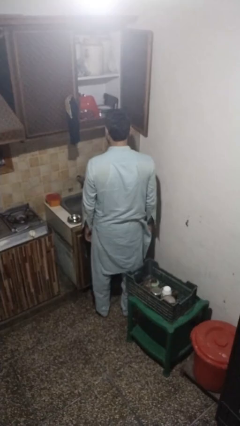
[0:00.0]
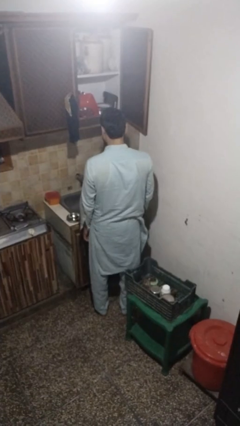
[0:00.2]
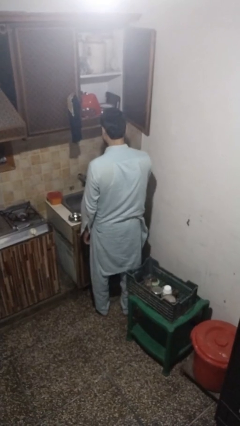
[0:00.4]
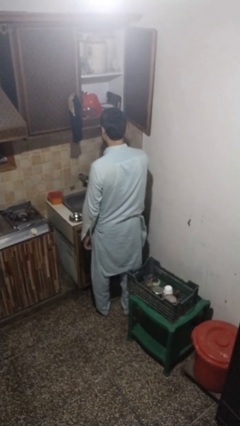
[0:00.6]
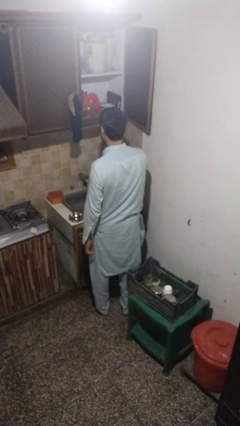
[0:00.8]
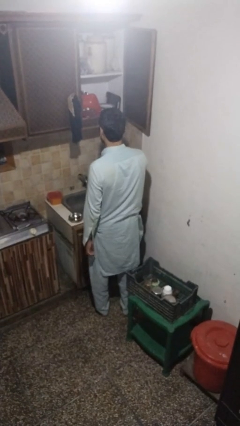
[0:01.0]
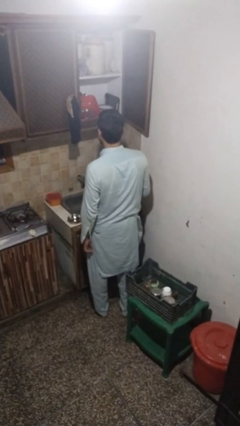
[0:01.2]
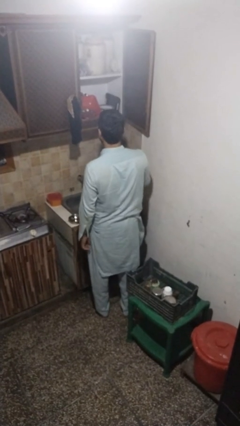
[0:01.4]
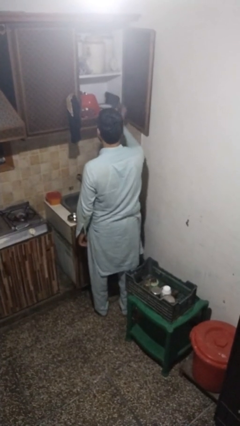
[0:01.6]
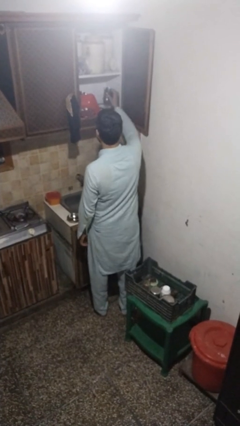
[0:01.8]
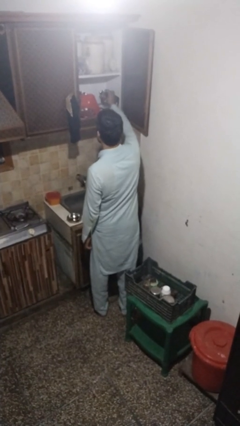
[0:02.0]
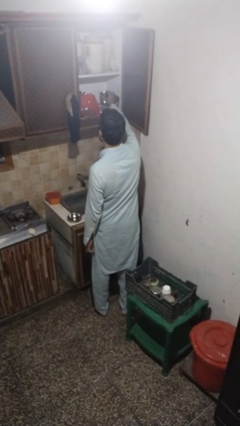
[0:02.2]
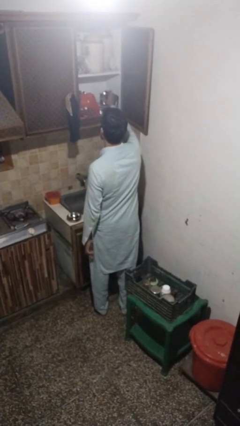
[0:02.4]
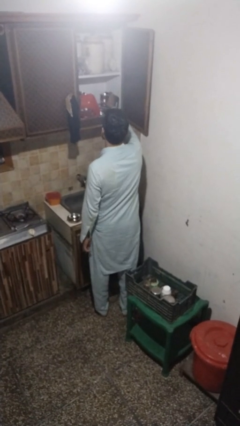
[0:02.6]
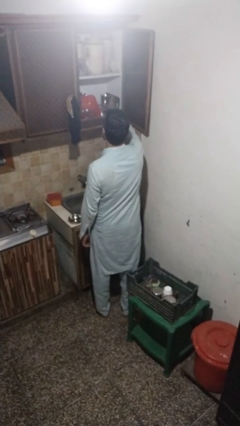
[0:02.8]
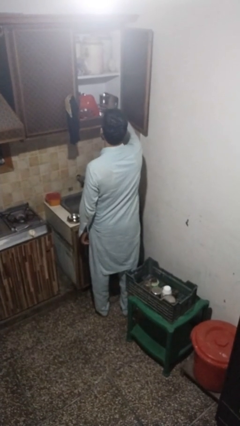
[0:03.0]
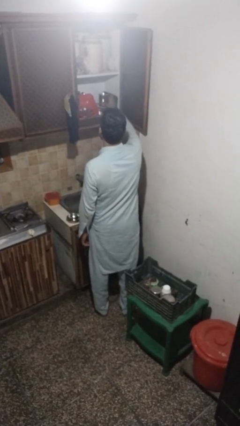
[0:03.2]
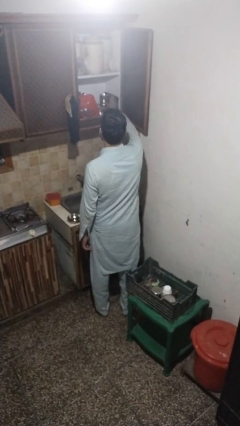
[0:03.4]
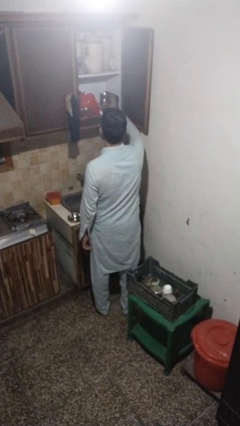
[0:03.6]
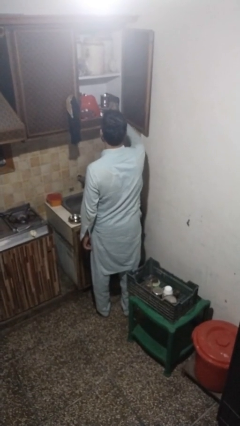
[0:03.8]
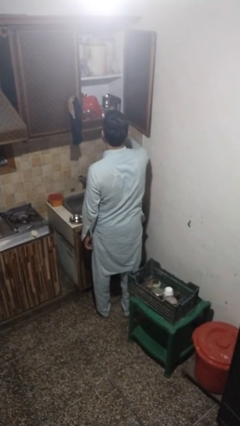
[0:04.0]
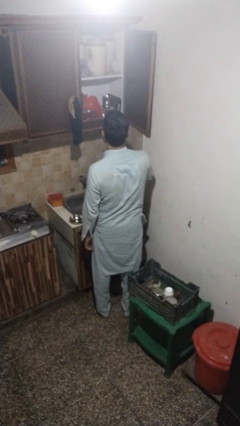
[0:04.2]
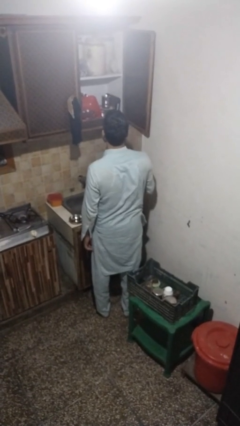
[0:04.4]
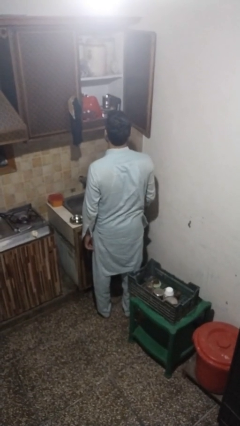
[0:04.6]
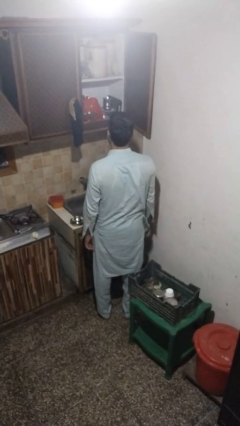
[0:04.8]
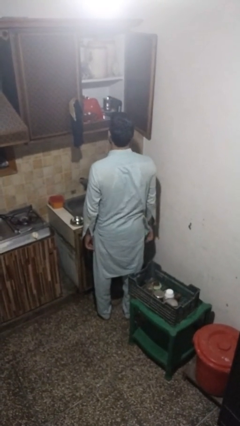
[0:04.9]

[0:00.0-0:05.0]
person puts object in cabinet

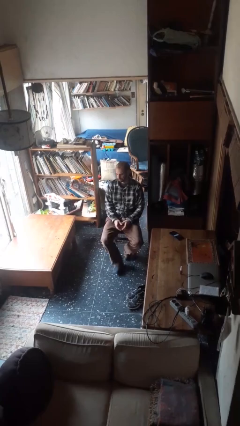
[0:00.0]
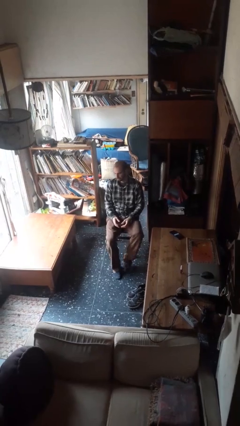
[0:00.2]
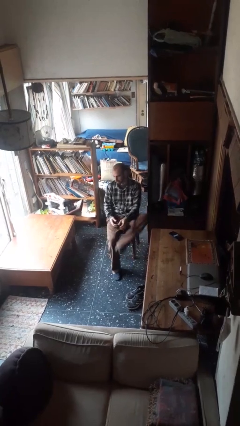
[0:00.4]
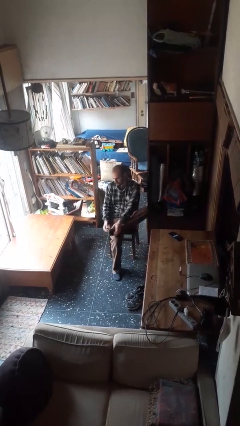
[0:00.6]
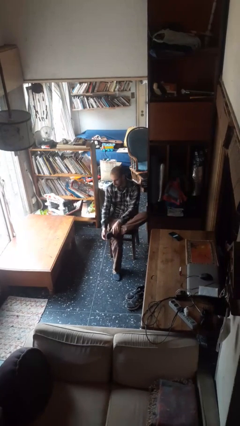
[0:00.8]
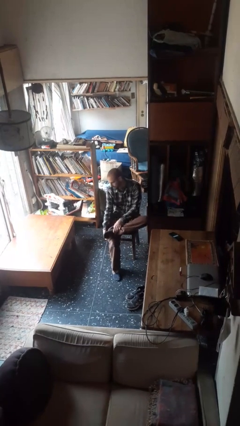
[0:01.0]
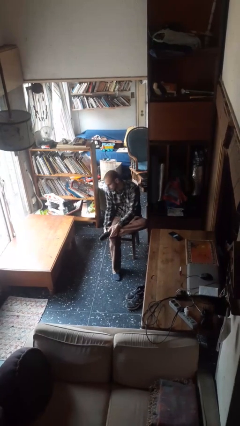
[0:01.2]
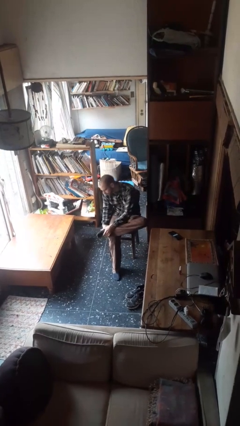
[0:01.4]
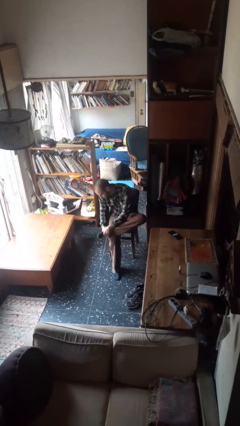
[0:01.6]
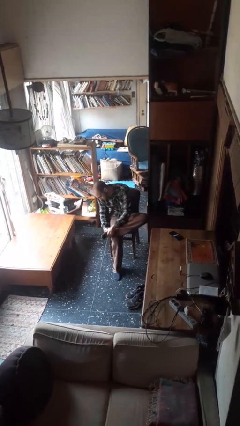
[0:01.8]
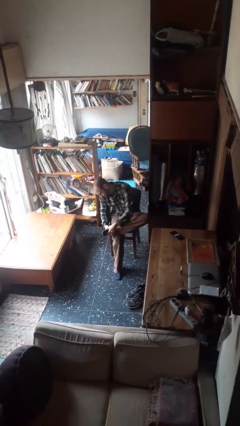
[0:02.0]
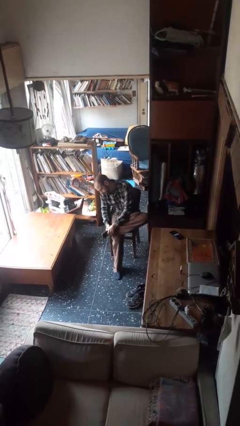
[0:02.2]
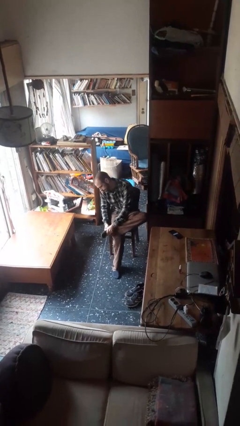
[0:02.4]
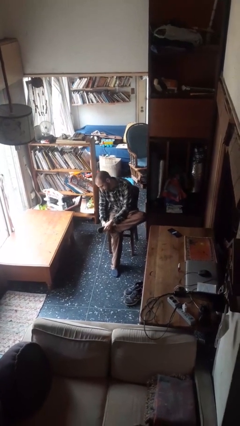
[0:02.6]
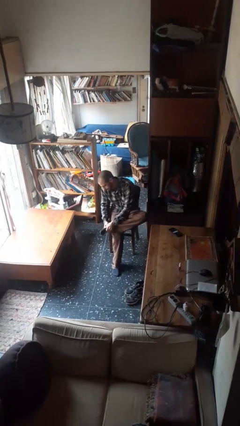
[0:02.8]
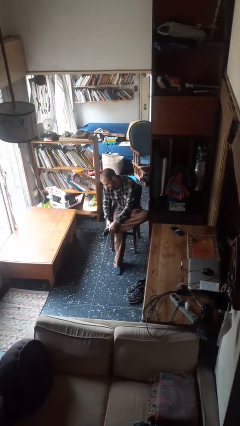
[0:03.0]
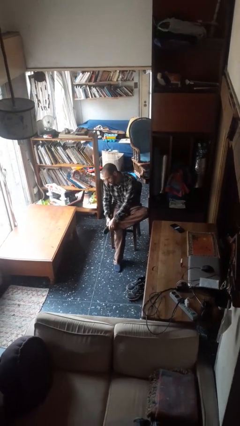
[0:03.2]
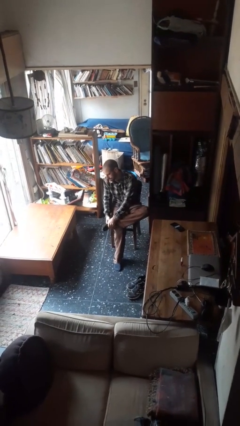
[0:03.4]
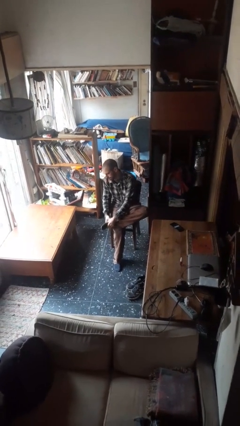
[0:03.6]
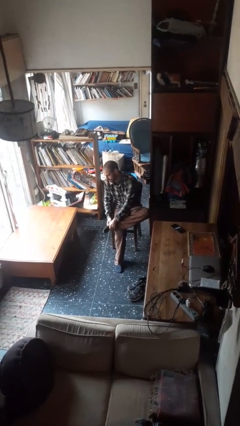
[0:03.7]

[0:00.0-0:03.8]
person rubs foot

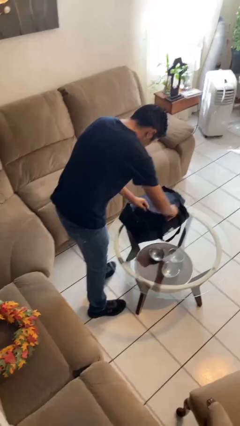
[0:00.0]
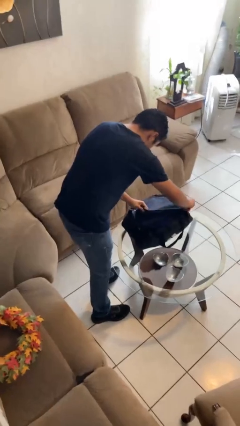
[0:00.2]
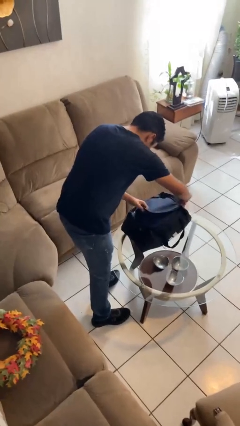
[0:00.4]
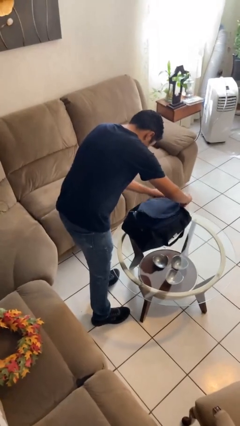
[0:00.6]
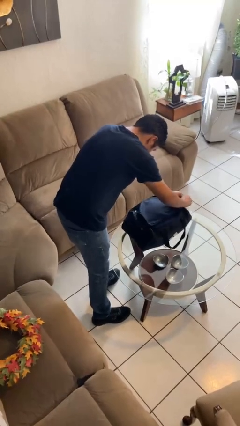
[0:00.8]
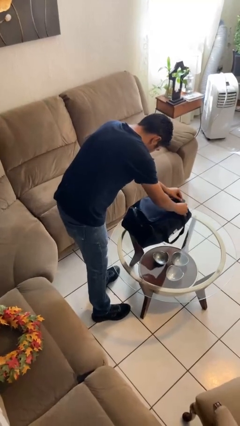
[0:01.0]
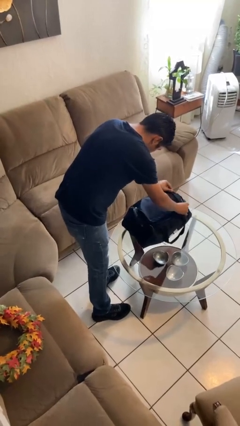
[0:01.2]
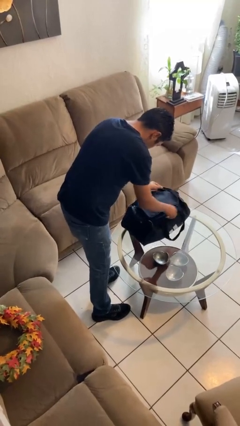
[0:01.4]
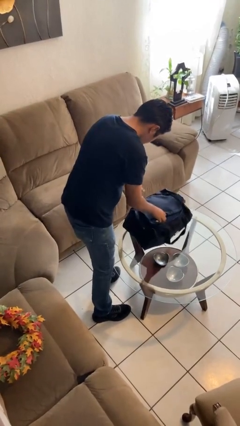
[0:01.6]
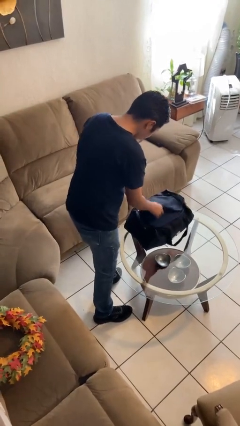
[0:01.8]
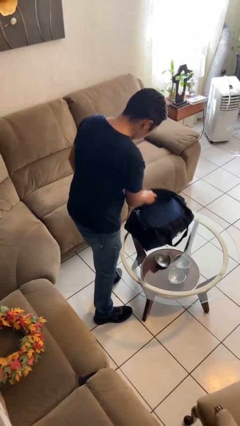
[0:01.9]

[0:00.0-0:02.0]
person opens suitcase

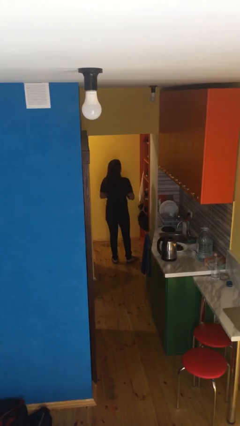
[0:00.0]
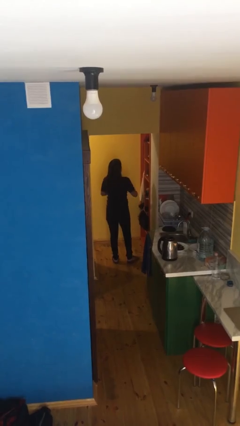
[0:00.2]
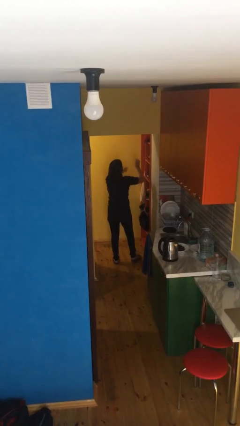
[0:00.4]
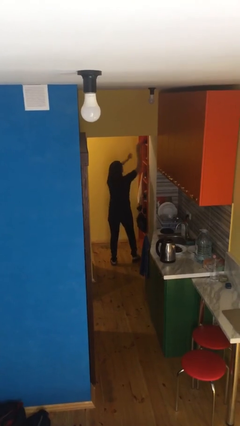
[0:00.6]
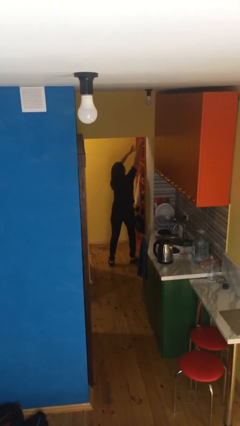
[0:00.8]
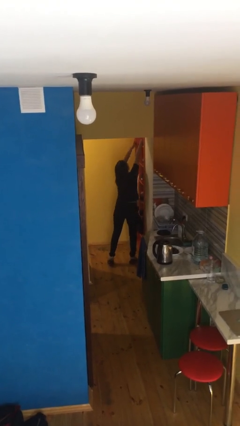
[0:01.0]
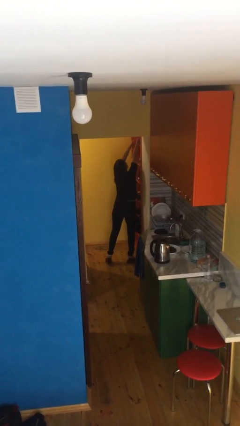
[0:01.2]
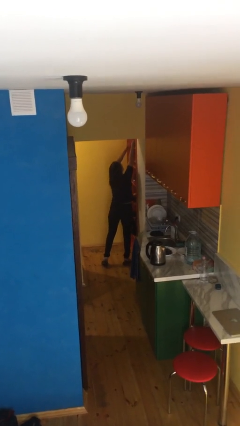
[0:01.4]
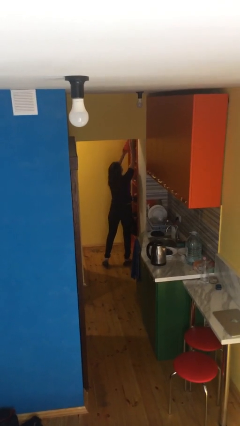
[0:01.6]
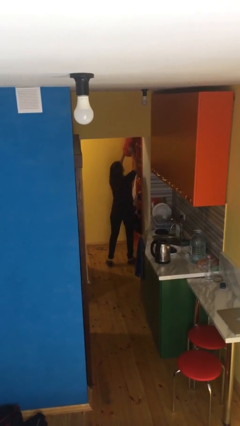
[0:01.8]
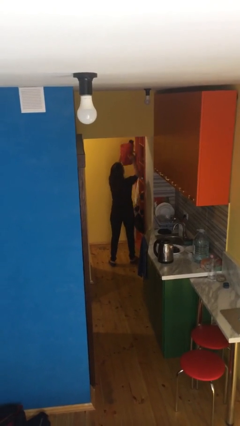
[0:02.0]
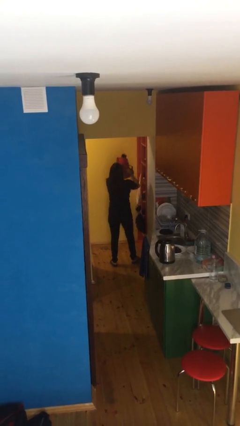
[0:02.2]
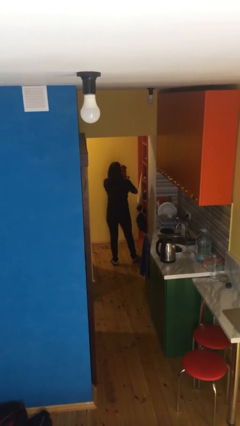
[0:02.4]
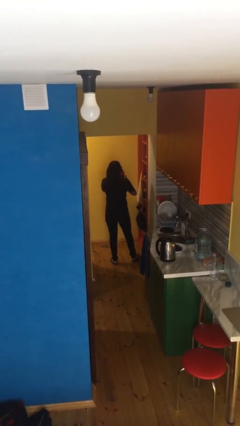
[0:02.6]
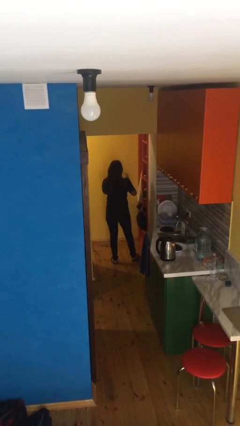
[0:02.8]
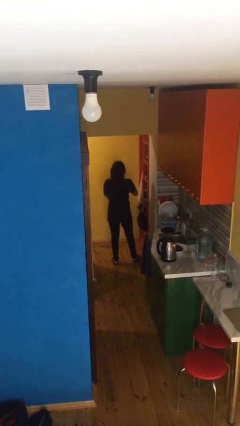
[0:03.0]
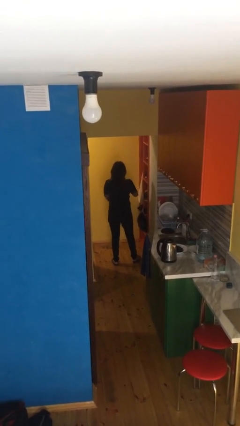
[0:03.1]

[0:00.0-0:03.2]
person picks up object from shelf

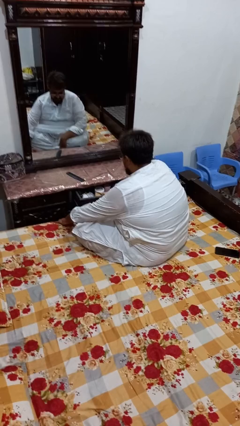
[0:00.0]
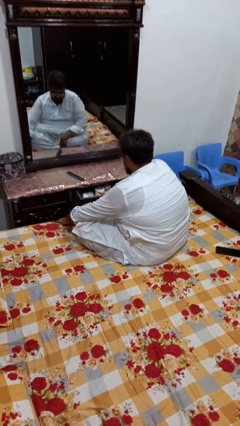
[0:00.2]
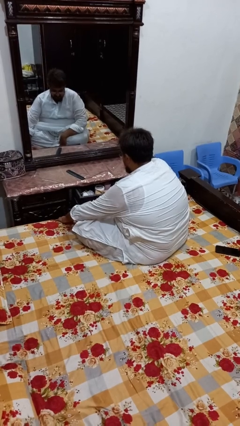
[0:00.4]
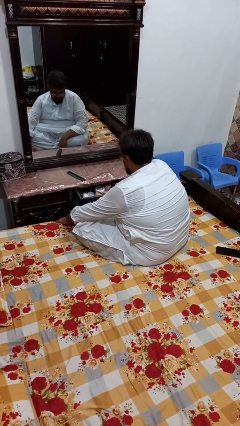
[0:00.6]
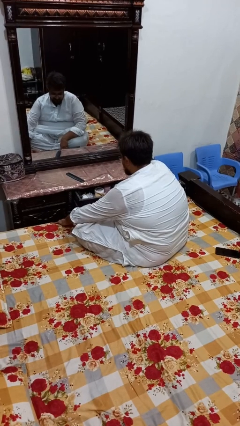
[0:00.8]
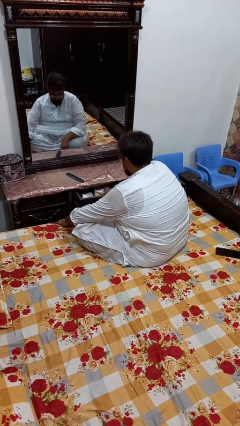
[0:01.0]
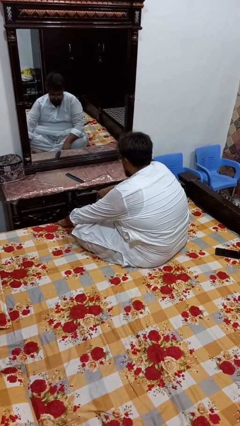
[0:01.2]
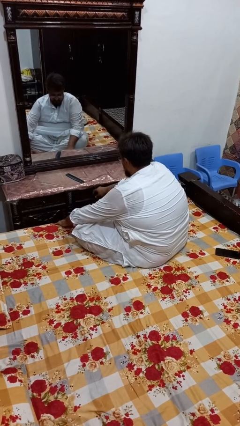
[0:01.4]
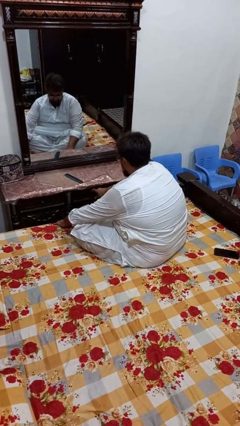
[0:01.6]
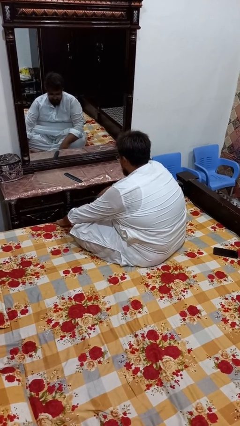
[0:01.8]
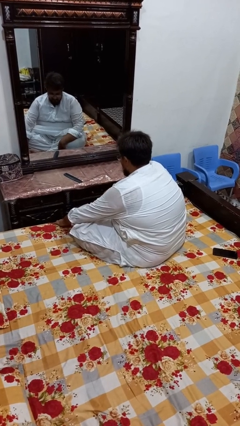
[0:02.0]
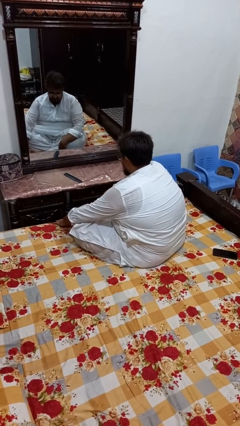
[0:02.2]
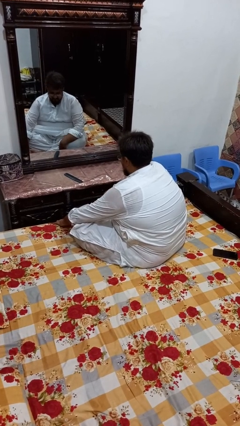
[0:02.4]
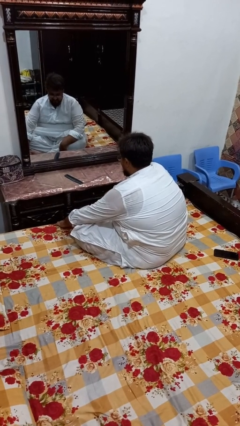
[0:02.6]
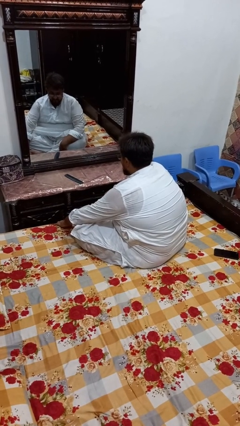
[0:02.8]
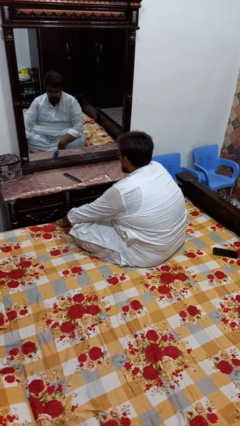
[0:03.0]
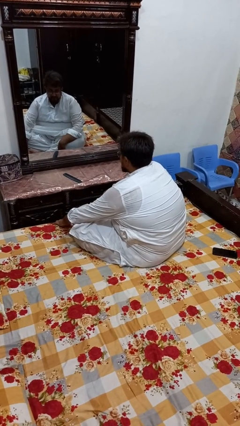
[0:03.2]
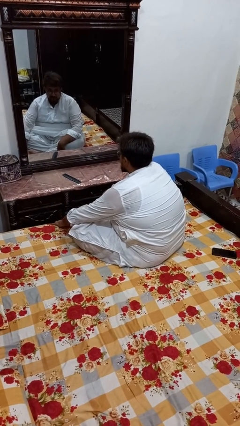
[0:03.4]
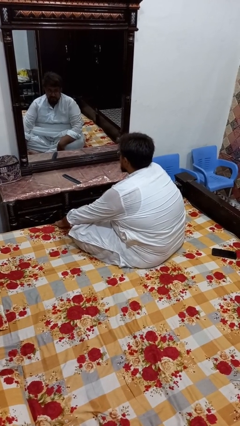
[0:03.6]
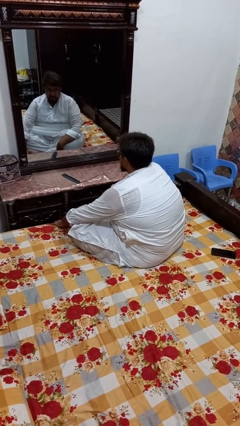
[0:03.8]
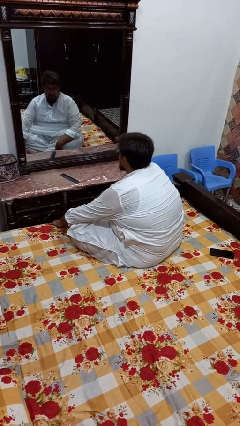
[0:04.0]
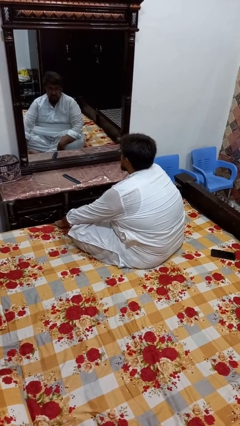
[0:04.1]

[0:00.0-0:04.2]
person closes dresser drawer
